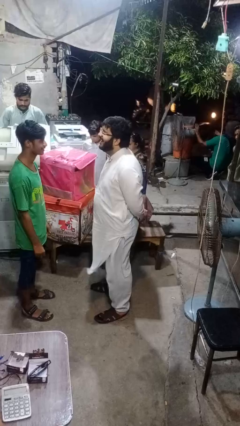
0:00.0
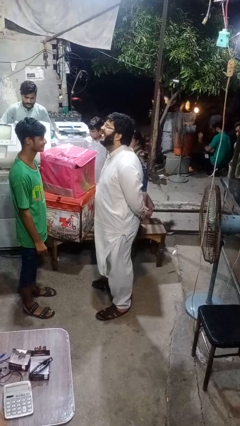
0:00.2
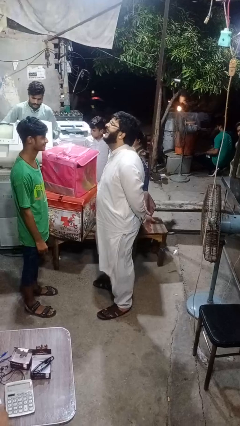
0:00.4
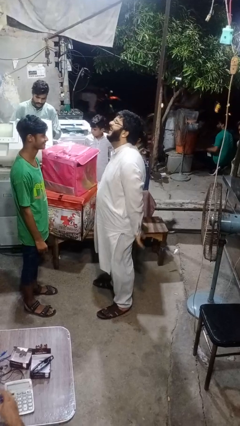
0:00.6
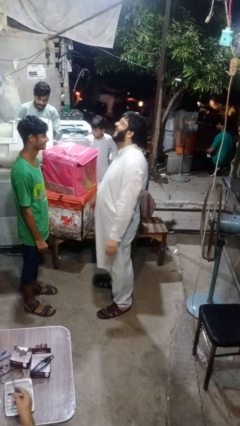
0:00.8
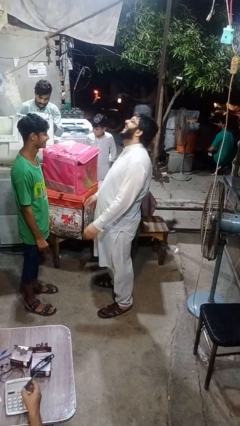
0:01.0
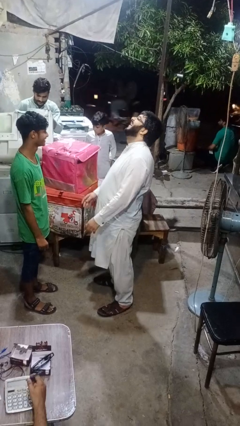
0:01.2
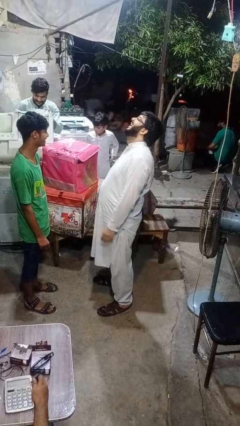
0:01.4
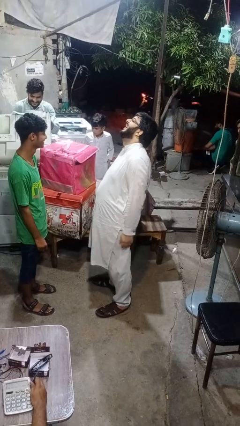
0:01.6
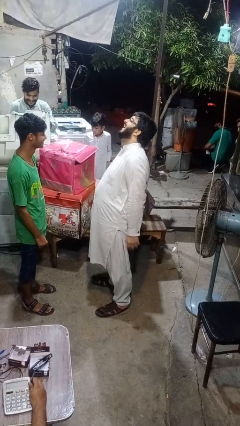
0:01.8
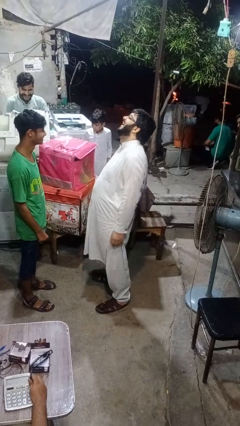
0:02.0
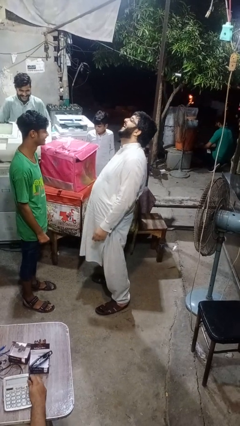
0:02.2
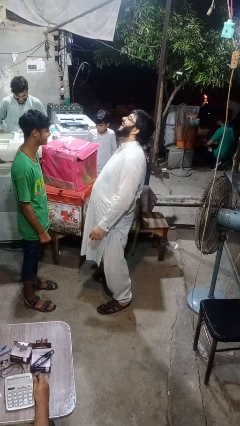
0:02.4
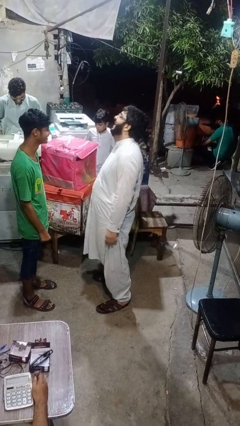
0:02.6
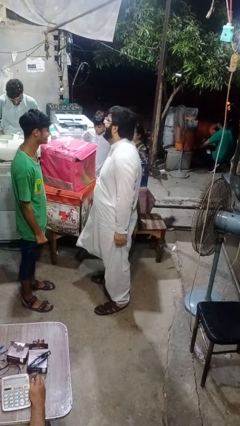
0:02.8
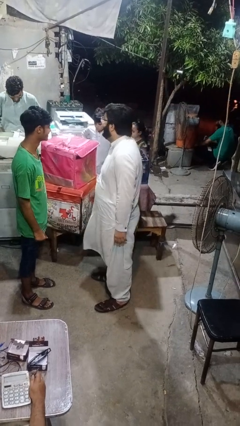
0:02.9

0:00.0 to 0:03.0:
person laughs with person

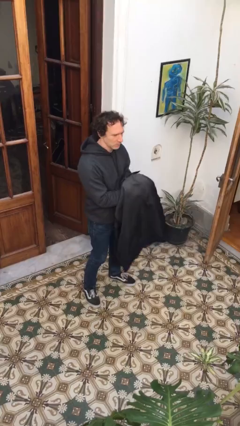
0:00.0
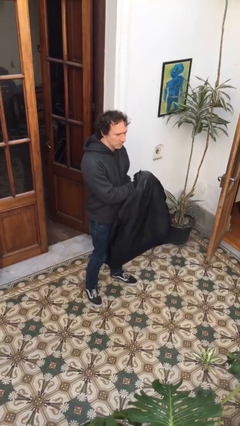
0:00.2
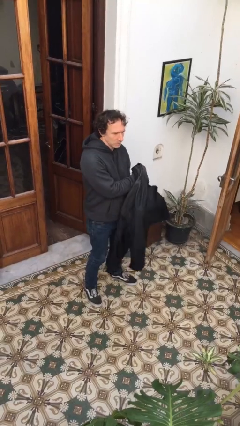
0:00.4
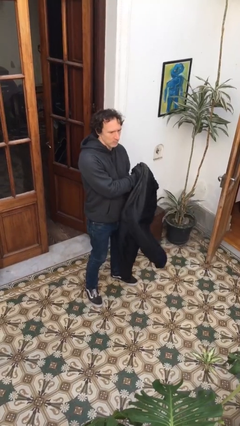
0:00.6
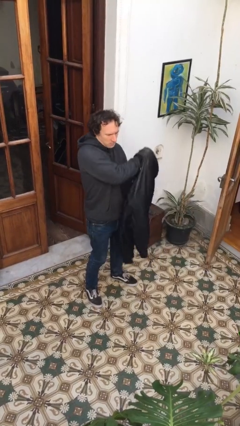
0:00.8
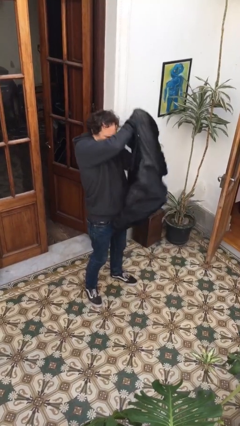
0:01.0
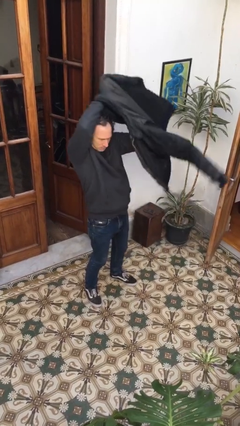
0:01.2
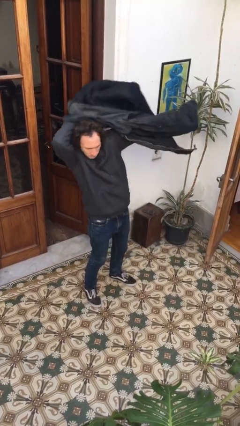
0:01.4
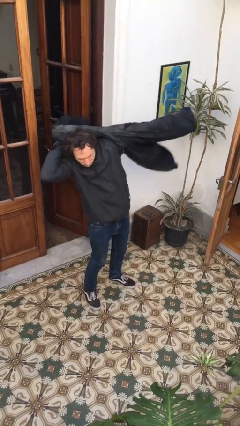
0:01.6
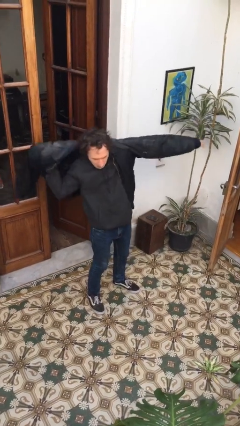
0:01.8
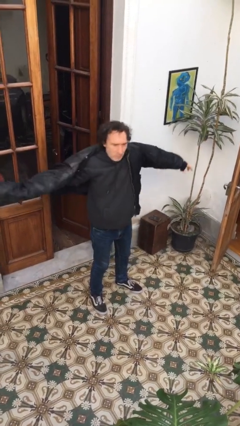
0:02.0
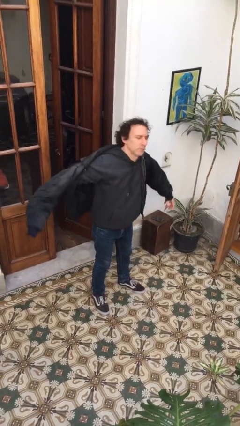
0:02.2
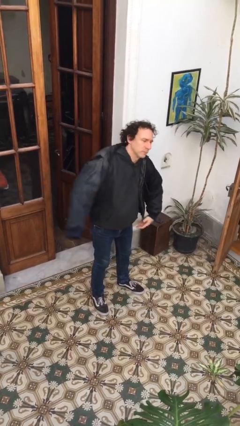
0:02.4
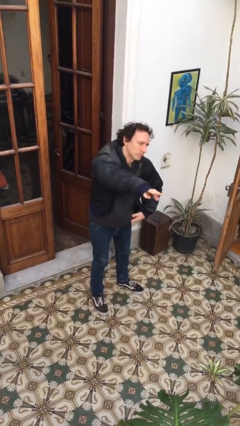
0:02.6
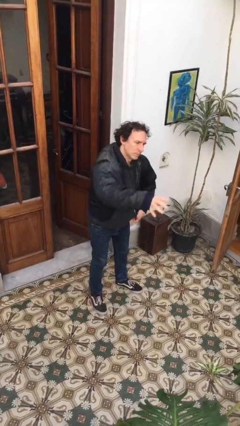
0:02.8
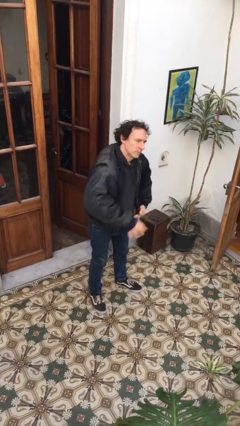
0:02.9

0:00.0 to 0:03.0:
person puts on jacket

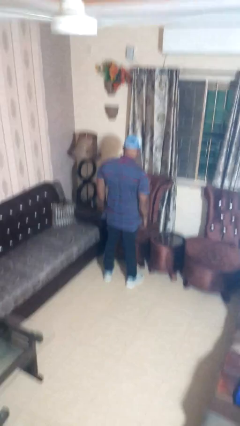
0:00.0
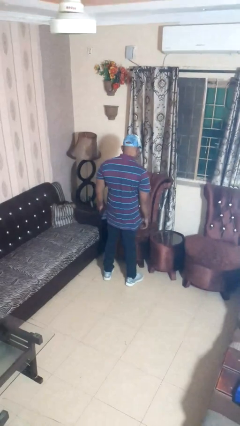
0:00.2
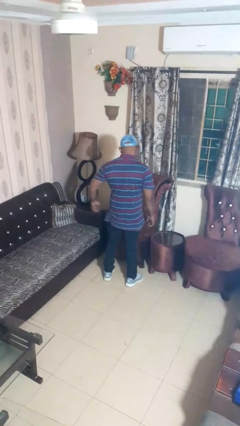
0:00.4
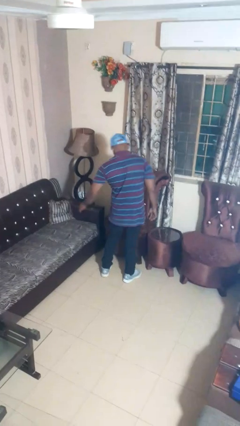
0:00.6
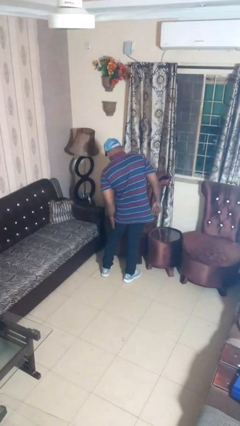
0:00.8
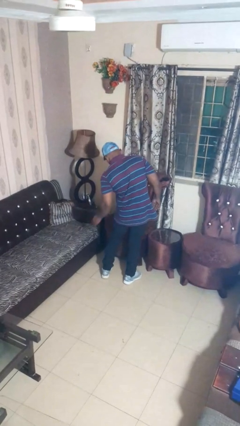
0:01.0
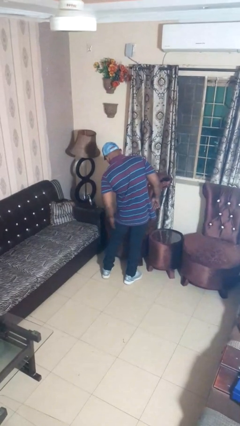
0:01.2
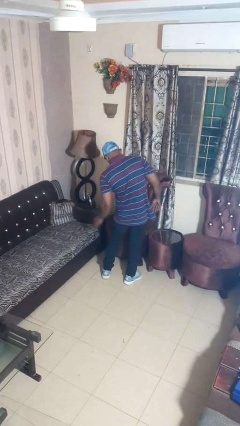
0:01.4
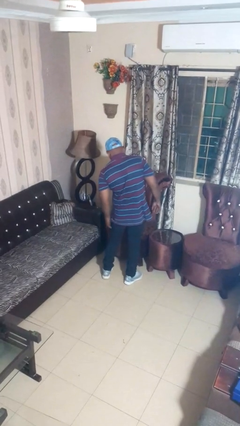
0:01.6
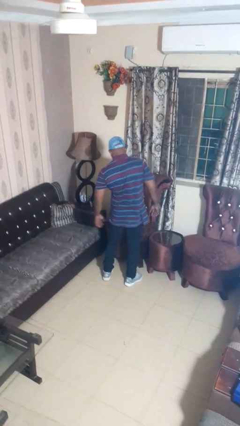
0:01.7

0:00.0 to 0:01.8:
person slaps hands on thighs

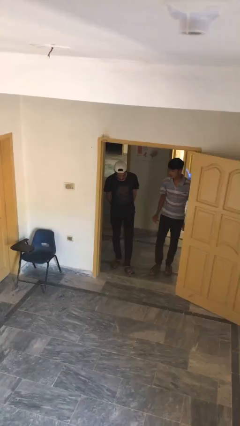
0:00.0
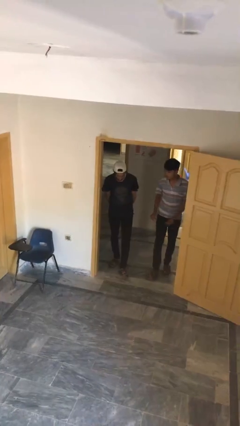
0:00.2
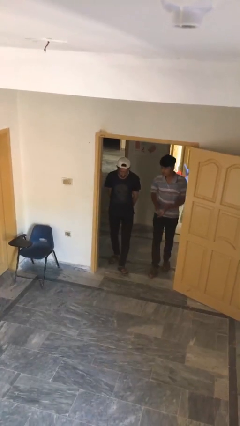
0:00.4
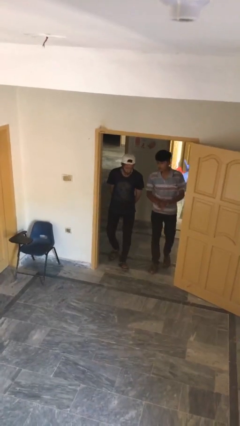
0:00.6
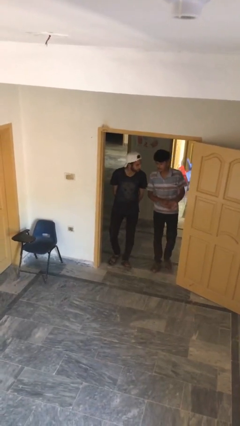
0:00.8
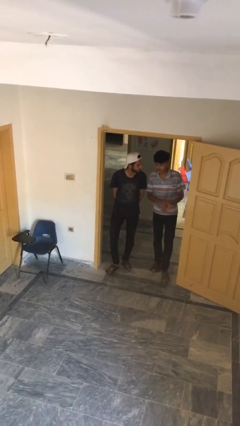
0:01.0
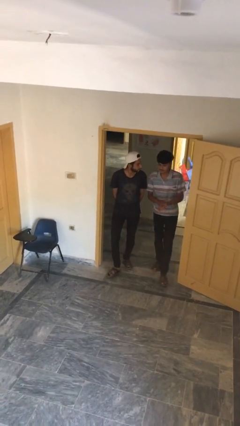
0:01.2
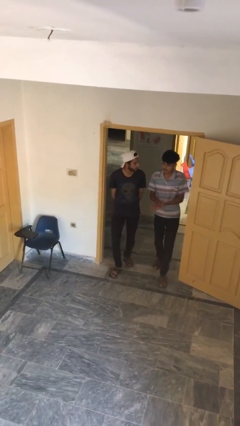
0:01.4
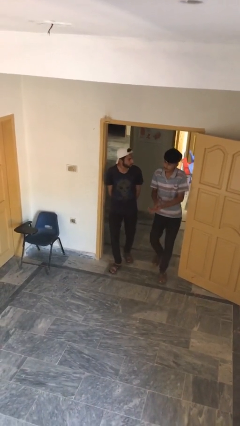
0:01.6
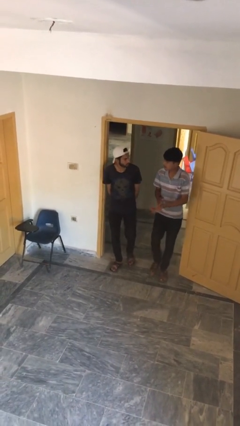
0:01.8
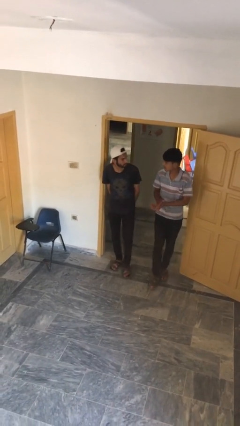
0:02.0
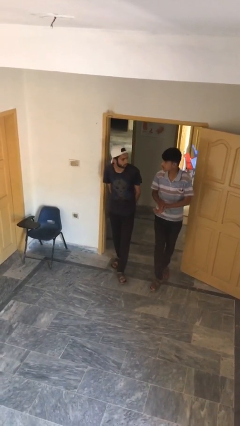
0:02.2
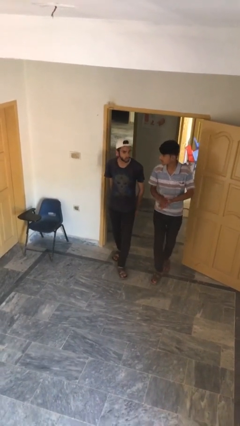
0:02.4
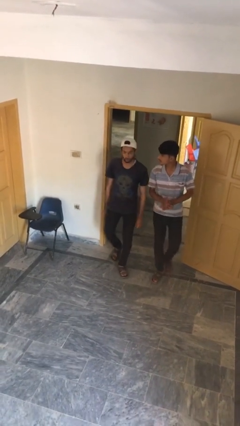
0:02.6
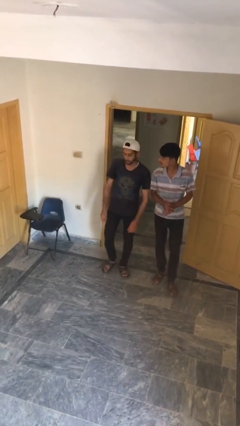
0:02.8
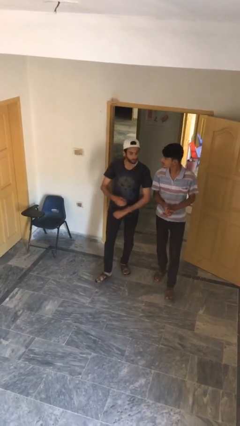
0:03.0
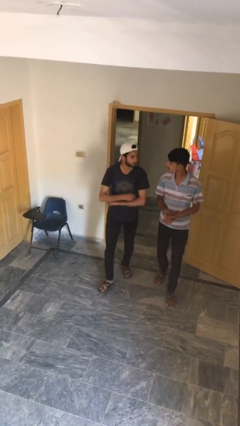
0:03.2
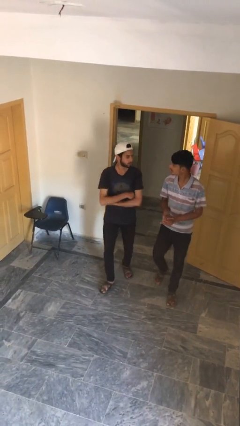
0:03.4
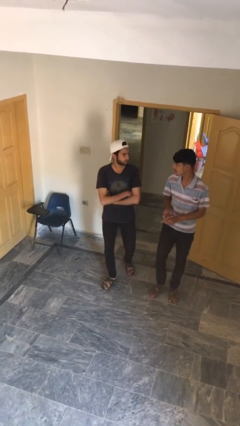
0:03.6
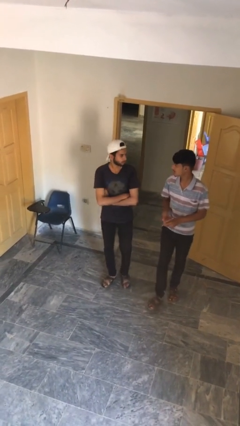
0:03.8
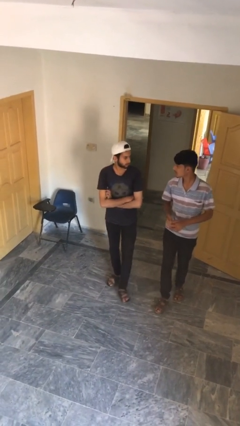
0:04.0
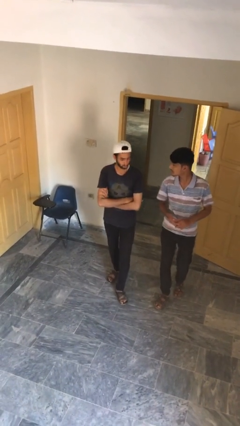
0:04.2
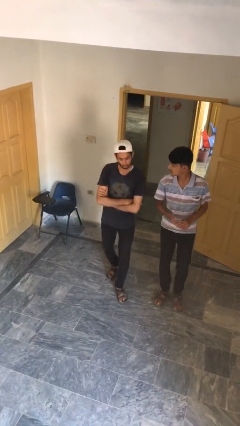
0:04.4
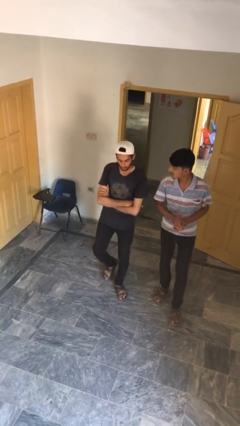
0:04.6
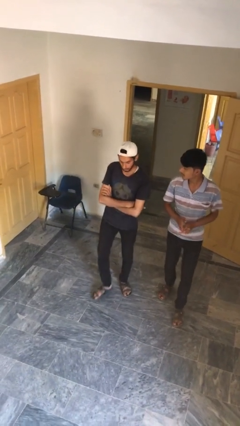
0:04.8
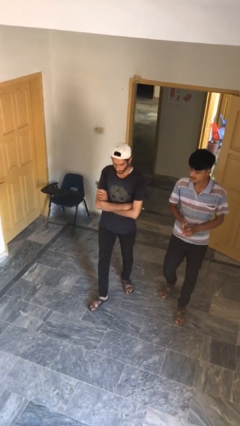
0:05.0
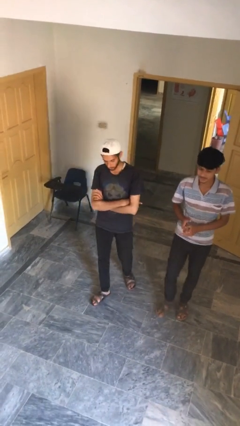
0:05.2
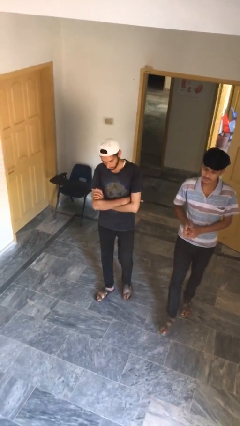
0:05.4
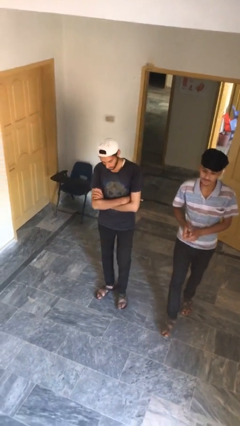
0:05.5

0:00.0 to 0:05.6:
person talks to person

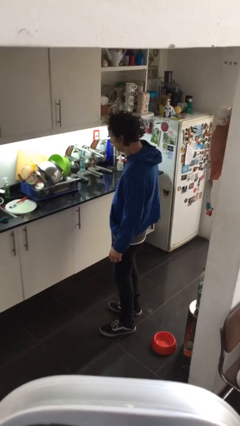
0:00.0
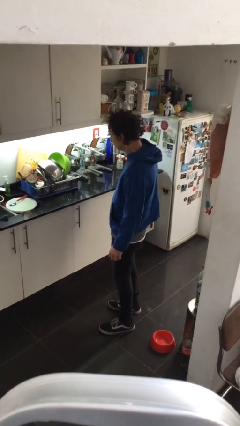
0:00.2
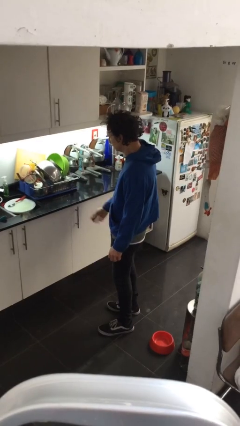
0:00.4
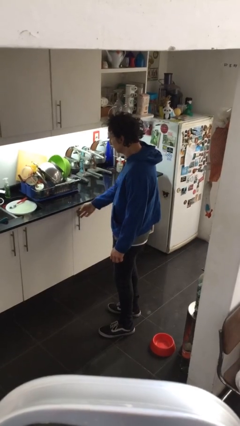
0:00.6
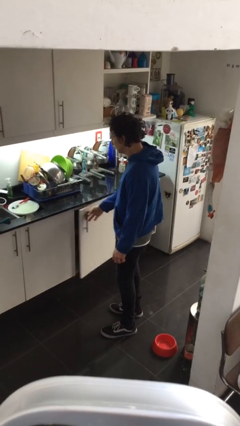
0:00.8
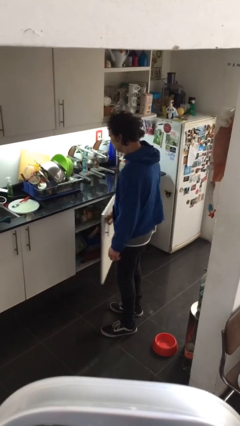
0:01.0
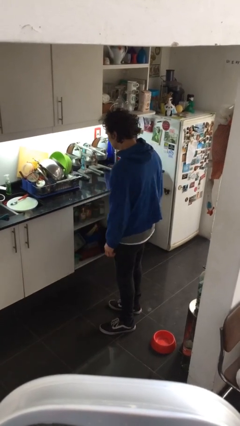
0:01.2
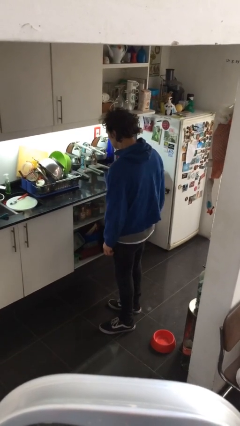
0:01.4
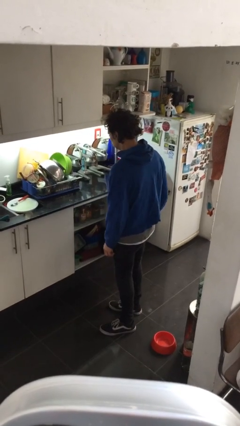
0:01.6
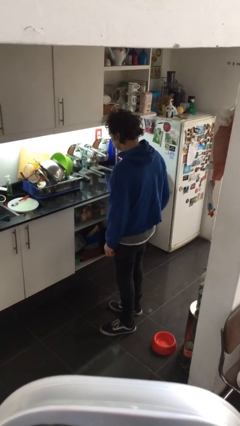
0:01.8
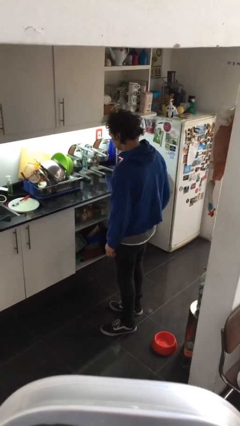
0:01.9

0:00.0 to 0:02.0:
person opens cabinet

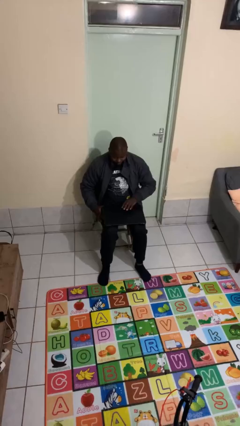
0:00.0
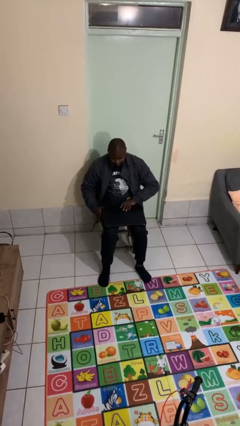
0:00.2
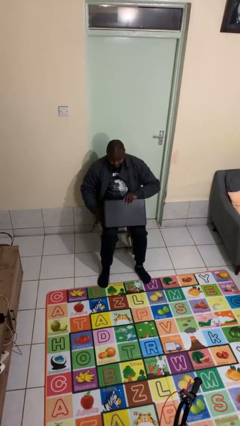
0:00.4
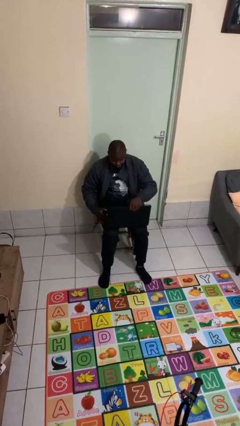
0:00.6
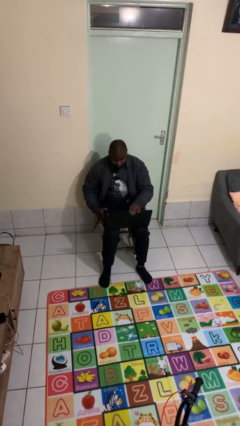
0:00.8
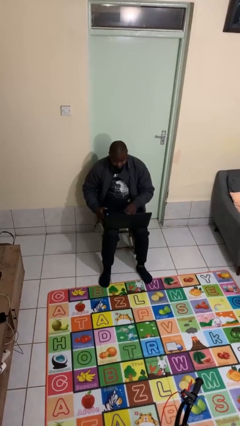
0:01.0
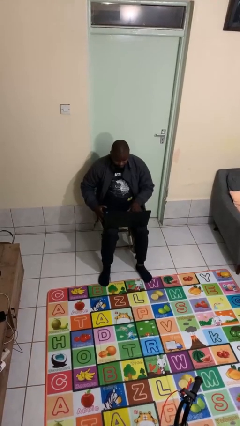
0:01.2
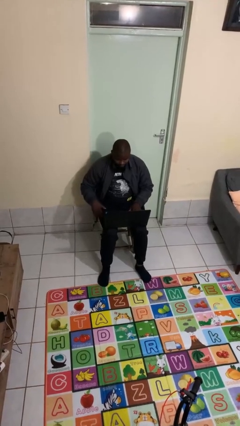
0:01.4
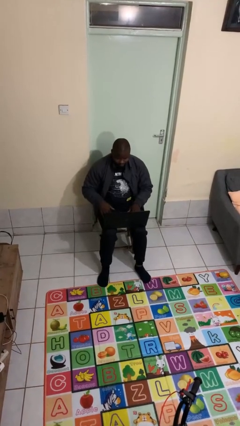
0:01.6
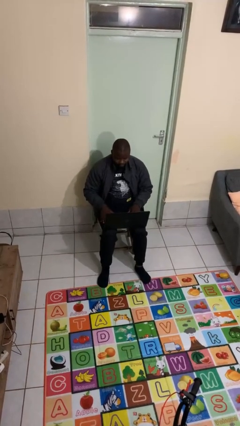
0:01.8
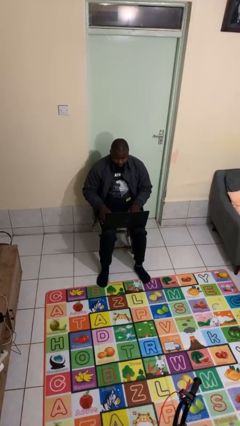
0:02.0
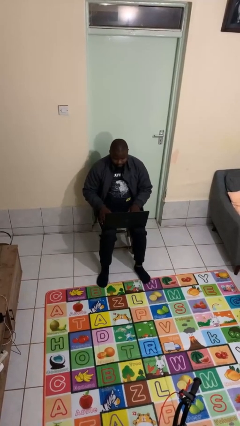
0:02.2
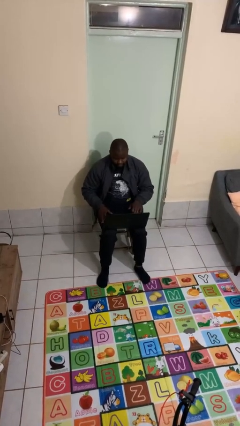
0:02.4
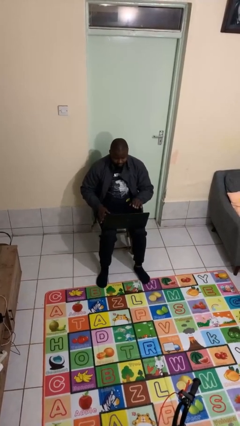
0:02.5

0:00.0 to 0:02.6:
person opens laptop
